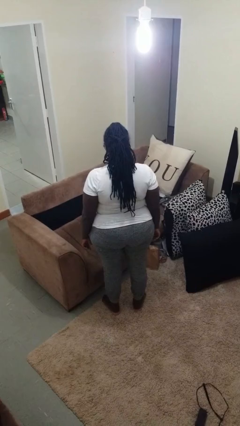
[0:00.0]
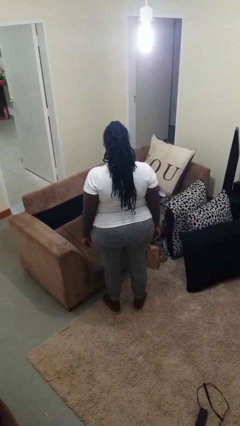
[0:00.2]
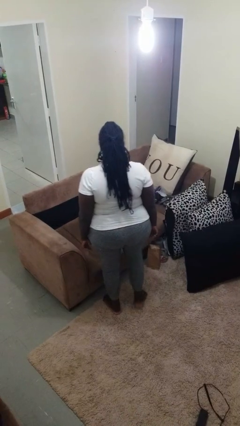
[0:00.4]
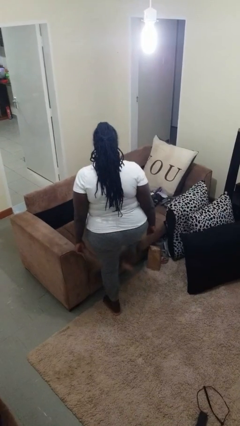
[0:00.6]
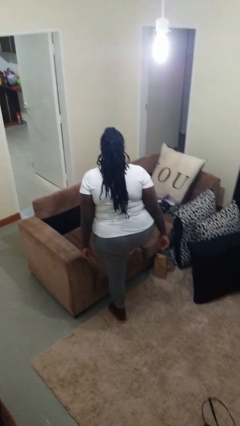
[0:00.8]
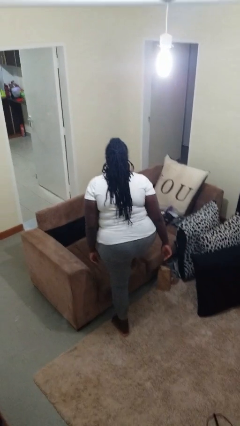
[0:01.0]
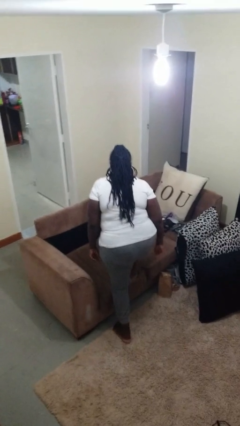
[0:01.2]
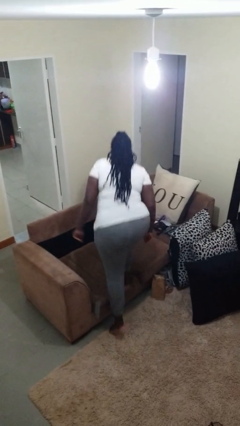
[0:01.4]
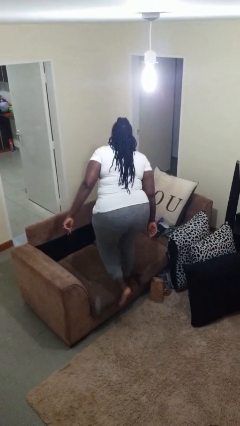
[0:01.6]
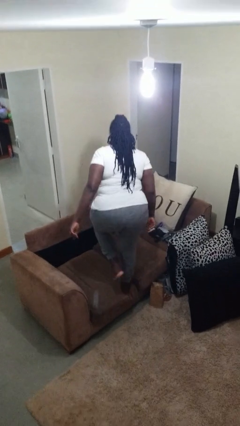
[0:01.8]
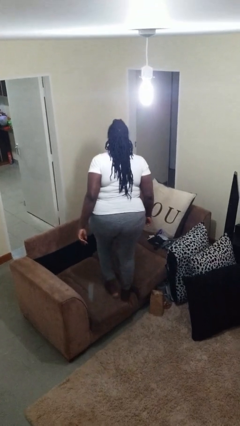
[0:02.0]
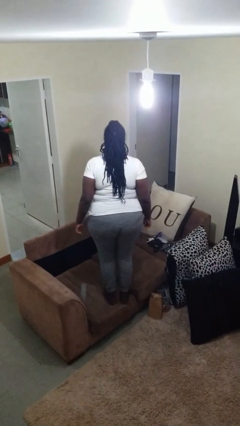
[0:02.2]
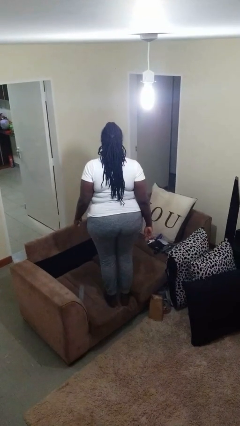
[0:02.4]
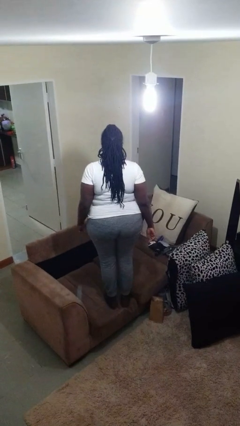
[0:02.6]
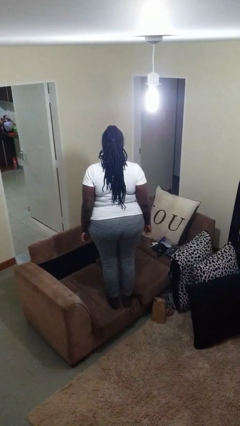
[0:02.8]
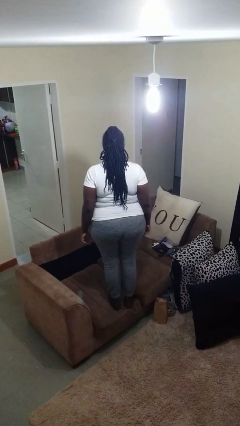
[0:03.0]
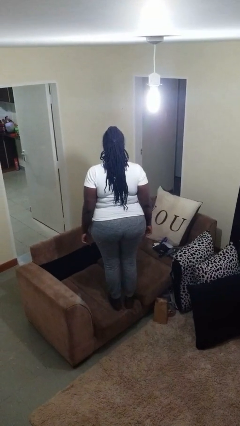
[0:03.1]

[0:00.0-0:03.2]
person climbs on couch

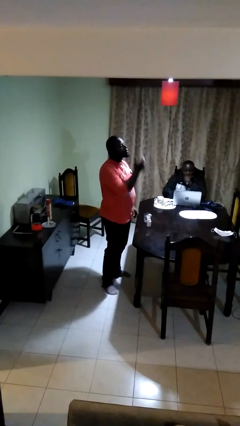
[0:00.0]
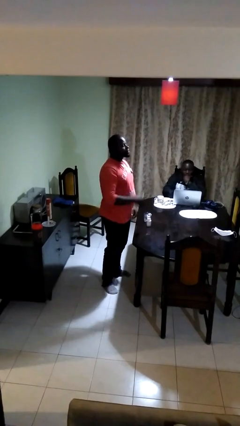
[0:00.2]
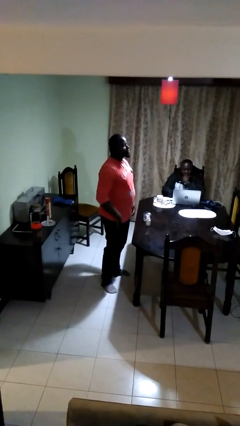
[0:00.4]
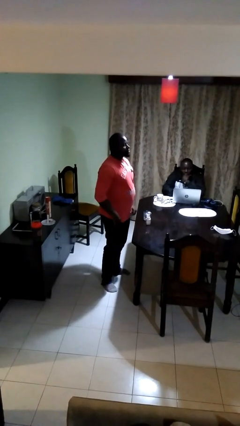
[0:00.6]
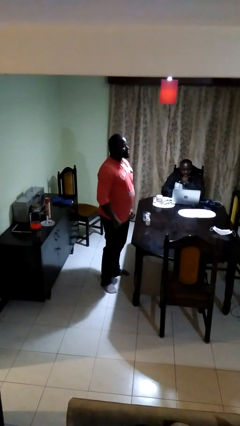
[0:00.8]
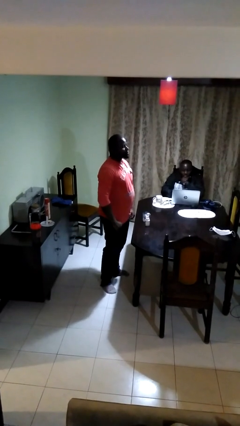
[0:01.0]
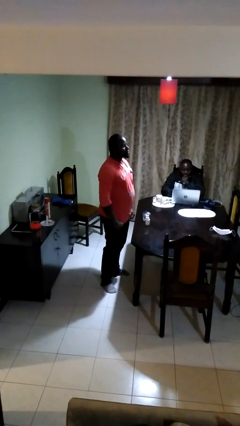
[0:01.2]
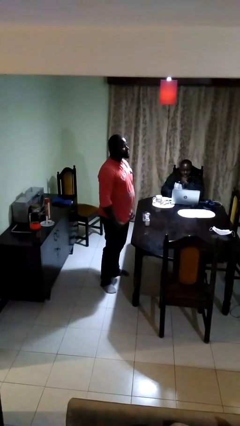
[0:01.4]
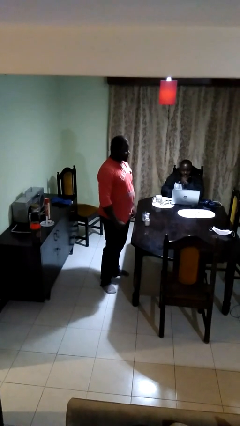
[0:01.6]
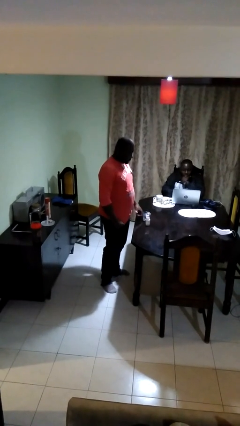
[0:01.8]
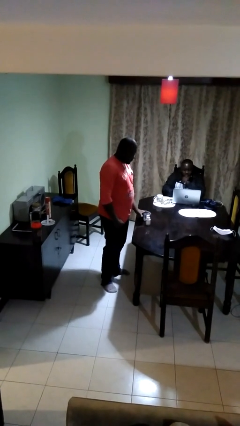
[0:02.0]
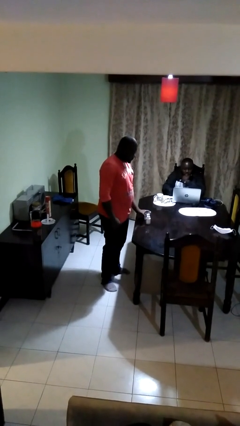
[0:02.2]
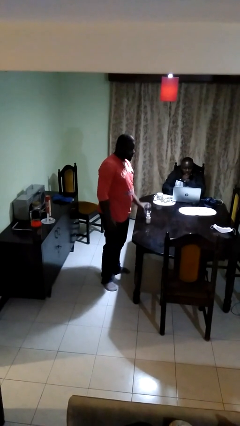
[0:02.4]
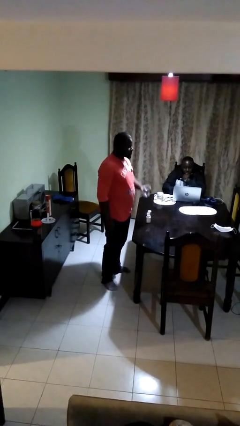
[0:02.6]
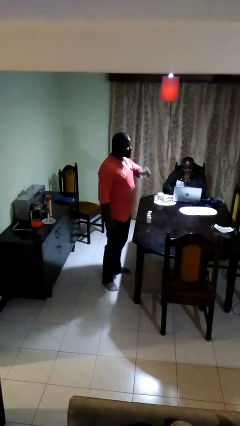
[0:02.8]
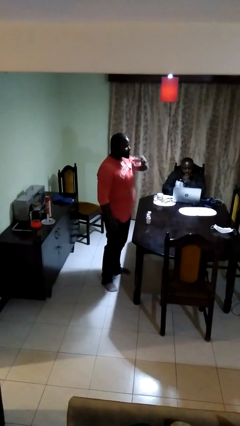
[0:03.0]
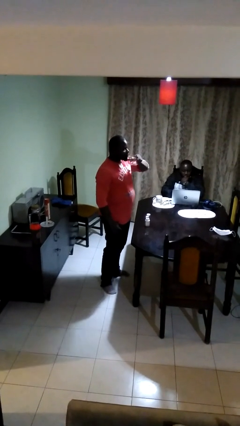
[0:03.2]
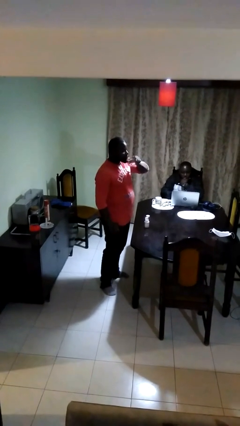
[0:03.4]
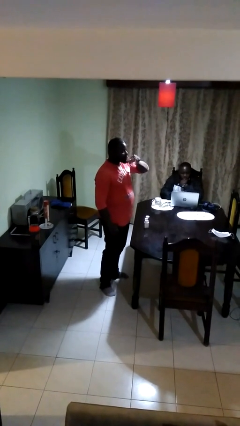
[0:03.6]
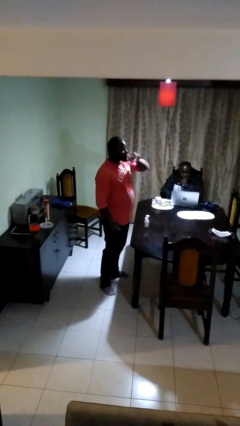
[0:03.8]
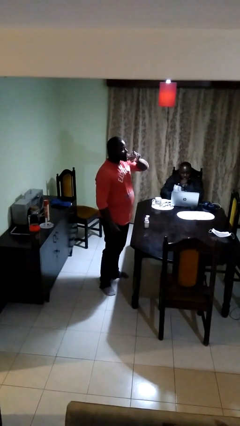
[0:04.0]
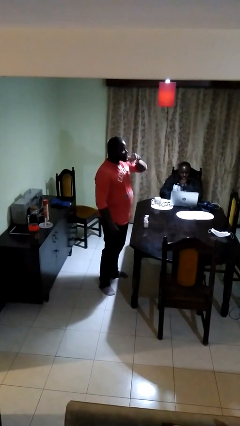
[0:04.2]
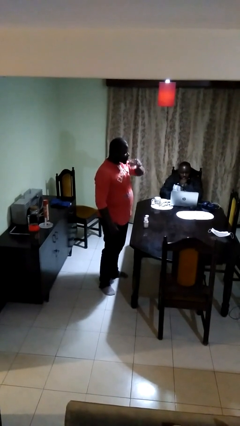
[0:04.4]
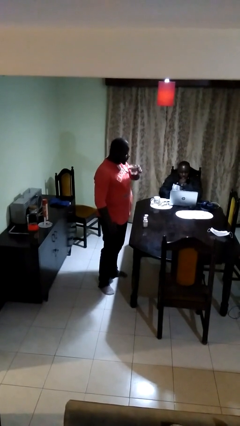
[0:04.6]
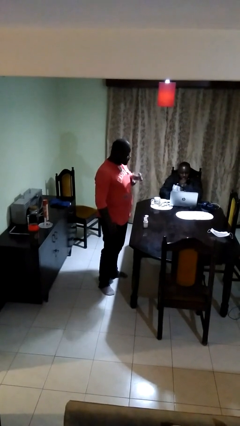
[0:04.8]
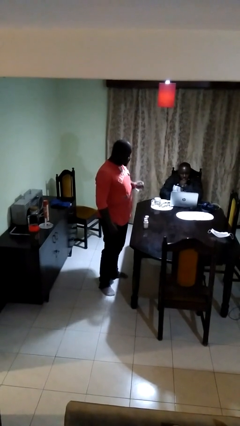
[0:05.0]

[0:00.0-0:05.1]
person drinks from cup

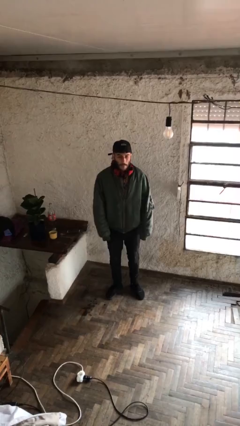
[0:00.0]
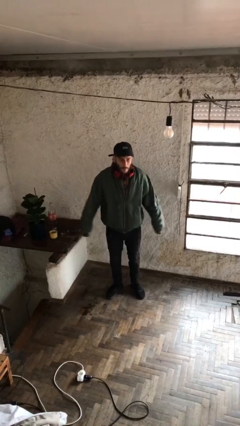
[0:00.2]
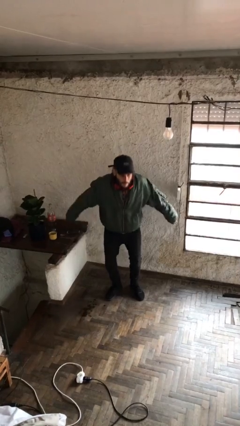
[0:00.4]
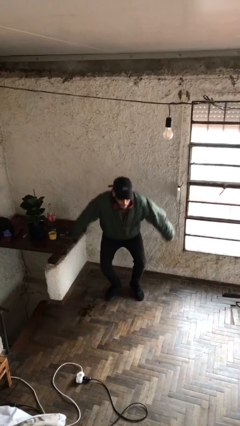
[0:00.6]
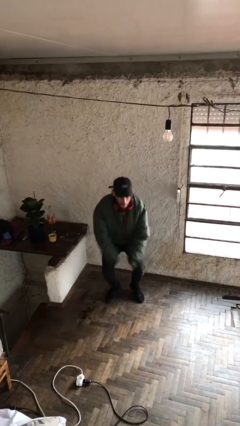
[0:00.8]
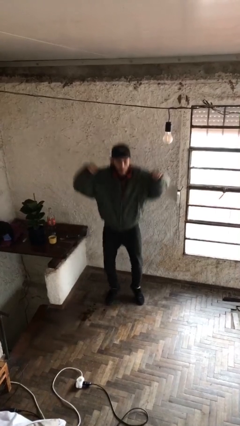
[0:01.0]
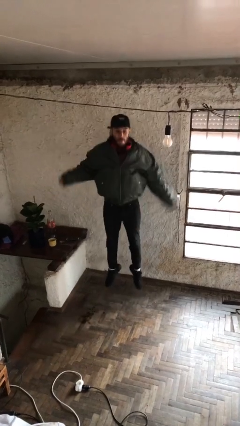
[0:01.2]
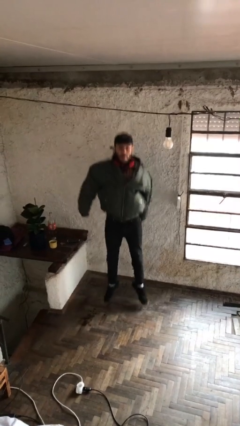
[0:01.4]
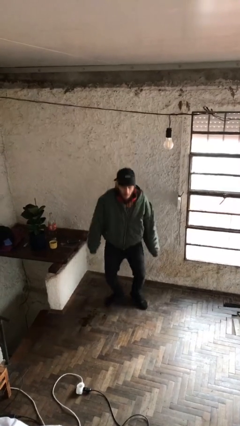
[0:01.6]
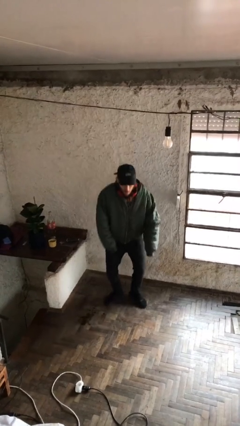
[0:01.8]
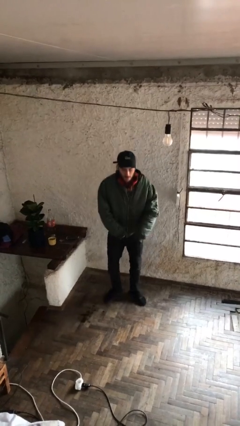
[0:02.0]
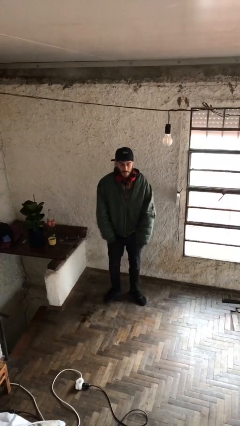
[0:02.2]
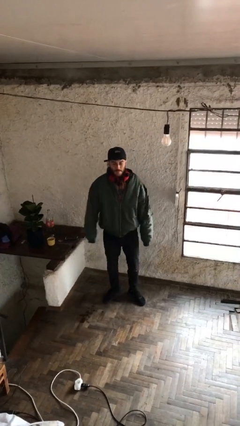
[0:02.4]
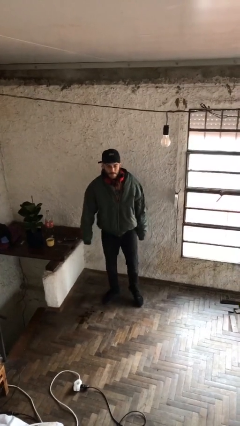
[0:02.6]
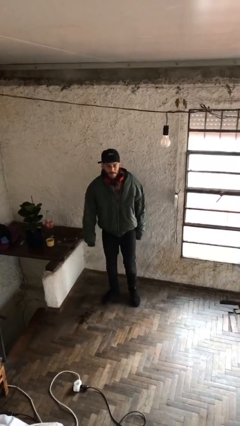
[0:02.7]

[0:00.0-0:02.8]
person jumps

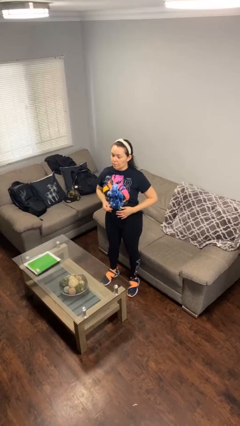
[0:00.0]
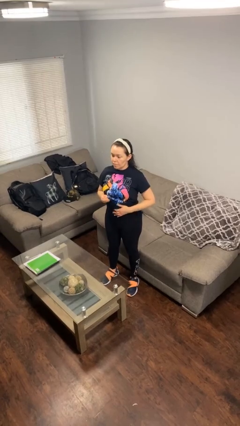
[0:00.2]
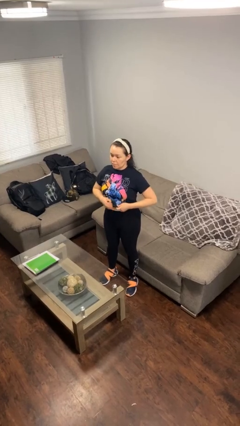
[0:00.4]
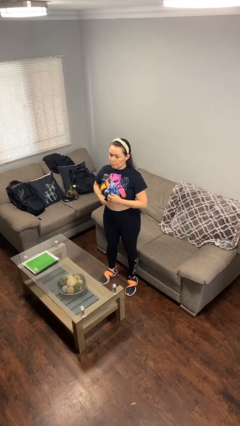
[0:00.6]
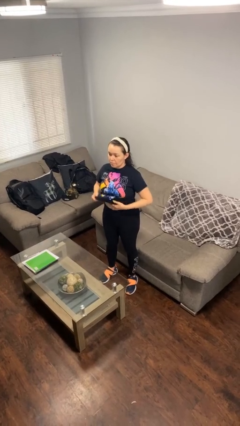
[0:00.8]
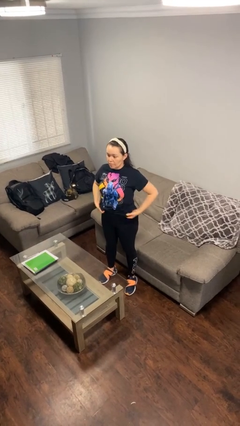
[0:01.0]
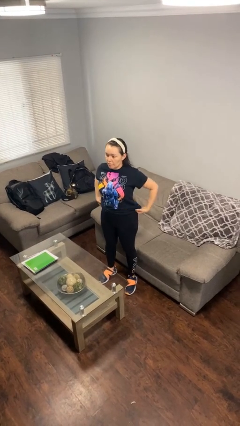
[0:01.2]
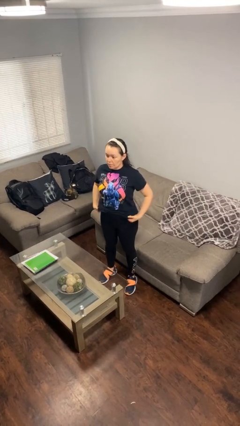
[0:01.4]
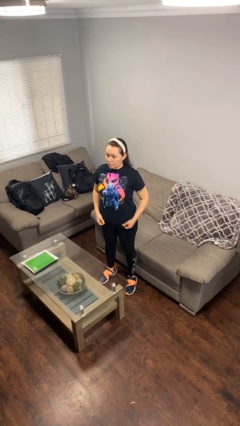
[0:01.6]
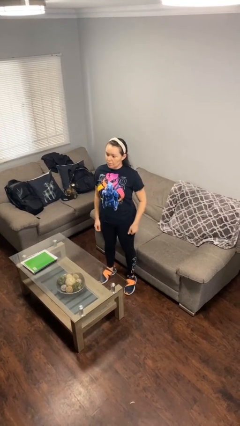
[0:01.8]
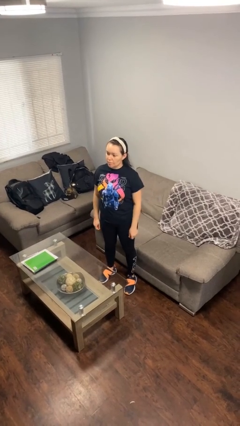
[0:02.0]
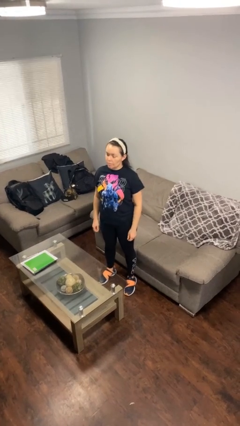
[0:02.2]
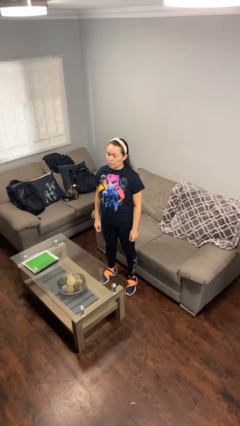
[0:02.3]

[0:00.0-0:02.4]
person untucks shirt

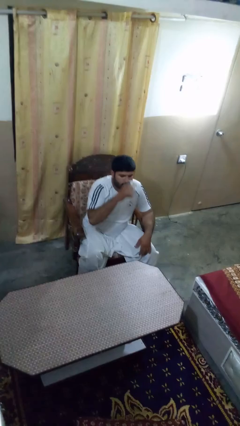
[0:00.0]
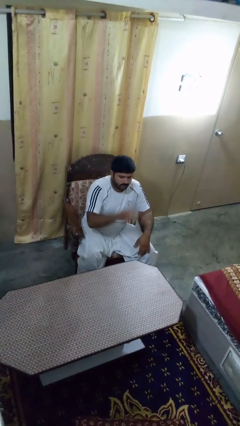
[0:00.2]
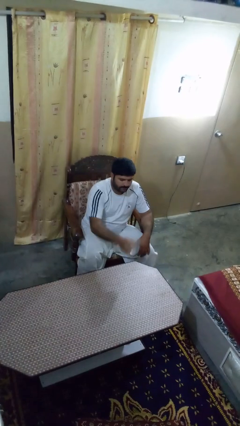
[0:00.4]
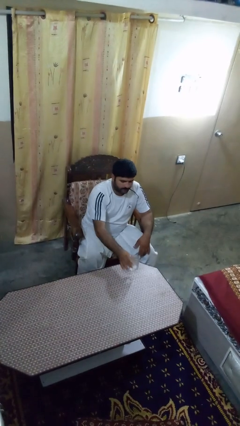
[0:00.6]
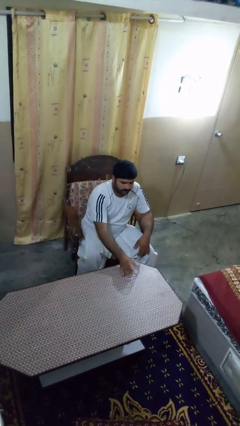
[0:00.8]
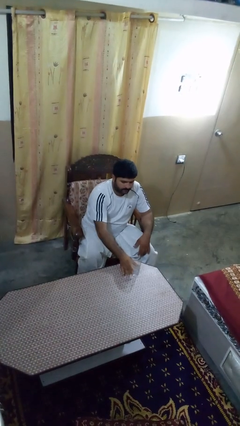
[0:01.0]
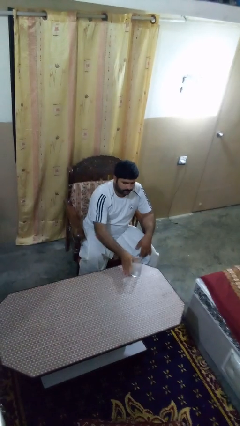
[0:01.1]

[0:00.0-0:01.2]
person puts down object on table

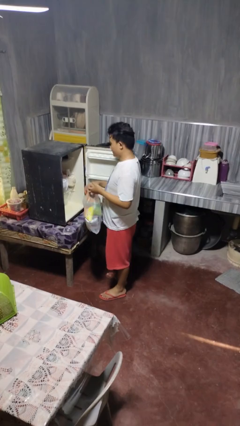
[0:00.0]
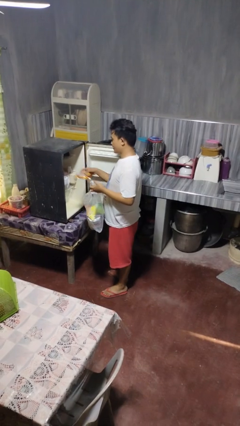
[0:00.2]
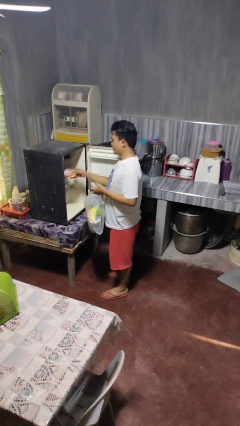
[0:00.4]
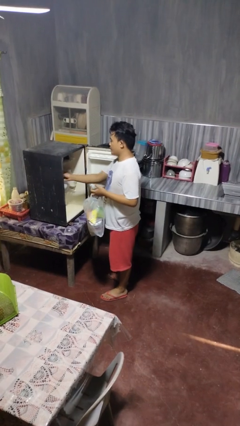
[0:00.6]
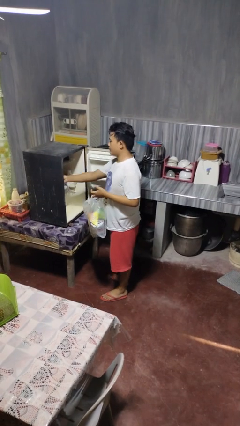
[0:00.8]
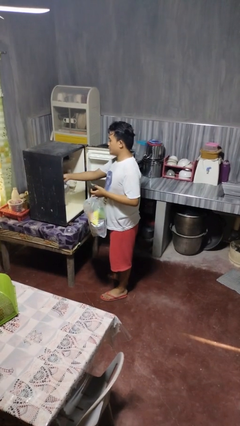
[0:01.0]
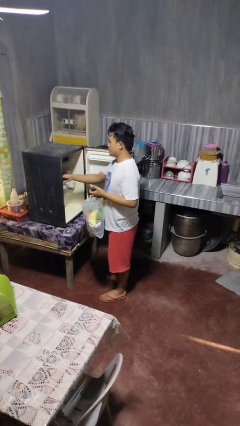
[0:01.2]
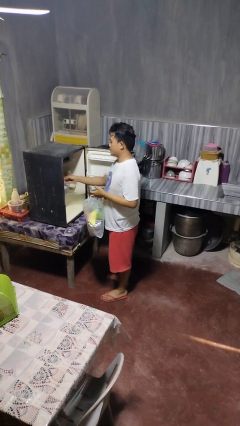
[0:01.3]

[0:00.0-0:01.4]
person loads groceries into refrigerator

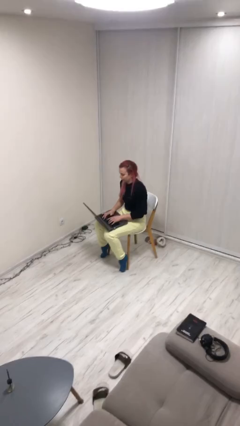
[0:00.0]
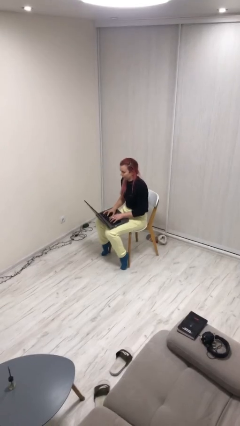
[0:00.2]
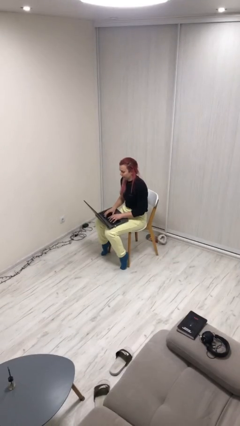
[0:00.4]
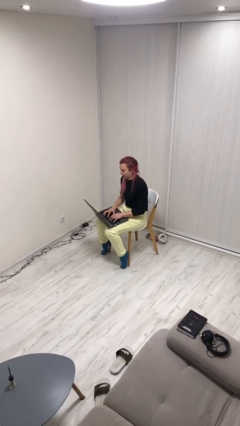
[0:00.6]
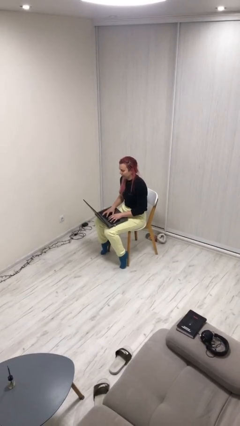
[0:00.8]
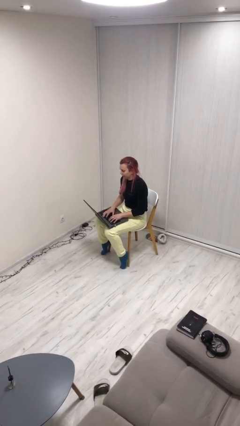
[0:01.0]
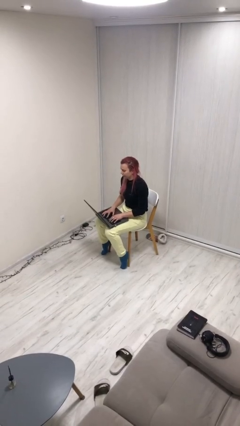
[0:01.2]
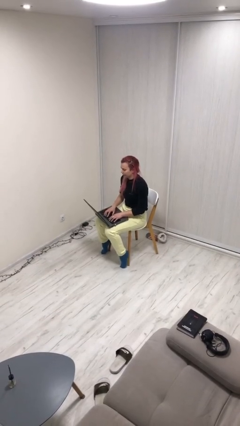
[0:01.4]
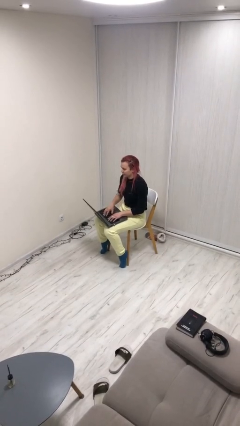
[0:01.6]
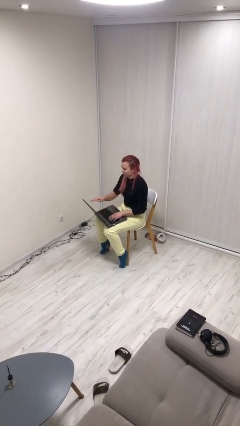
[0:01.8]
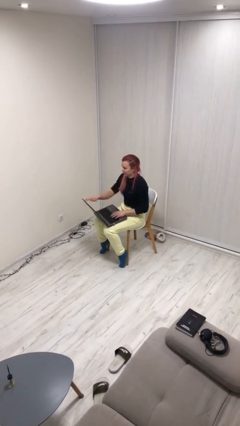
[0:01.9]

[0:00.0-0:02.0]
person interacts with laptop
